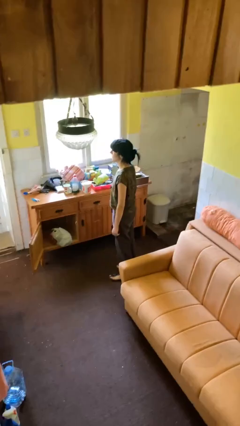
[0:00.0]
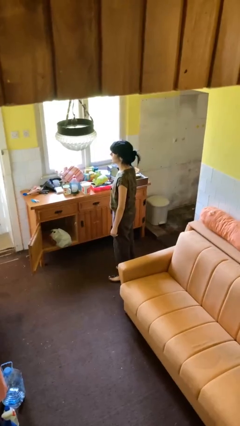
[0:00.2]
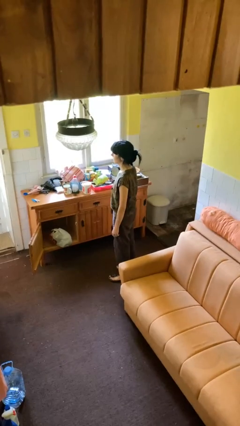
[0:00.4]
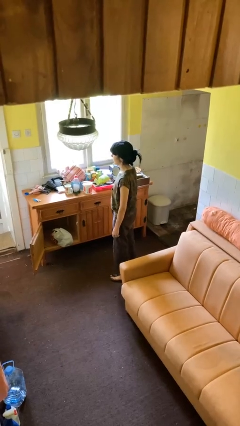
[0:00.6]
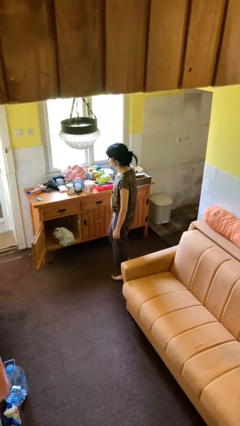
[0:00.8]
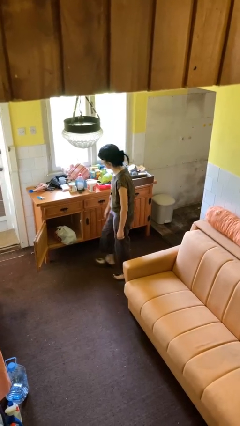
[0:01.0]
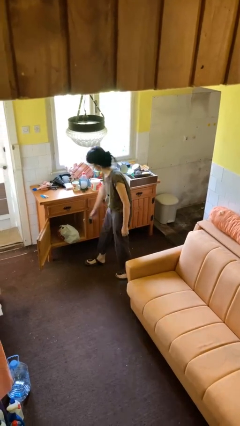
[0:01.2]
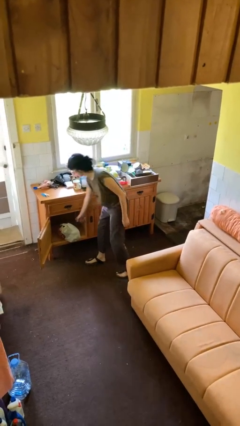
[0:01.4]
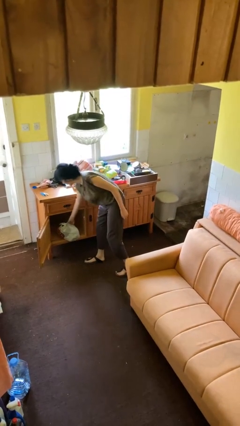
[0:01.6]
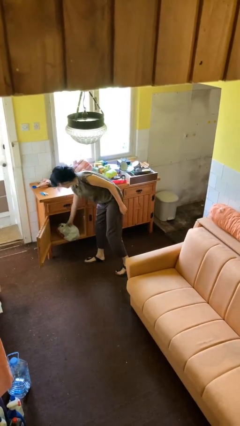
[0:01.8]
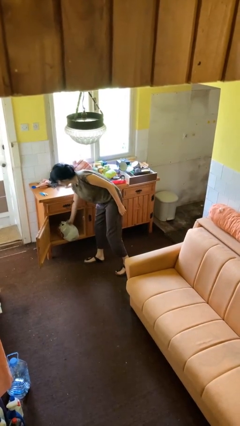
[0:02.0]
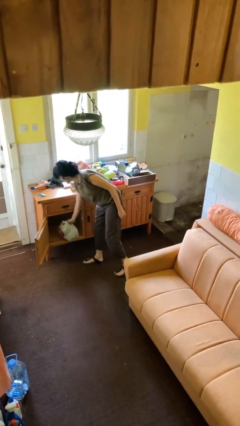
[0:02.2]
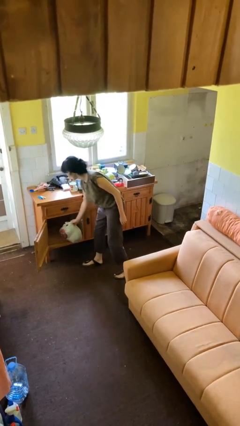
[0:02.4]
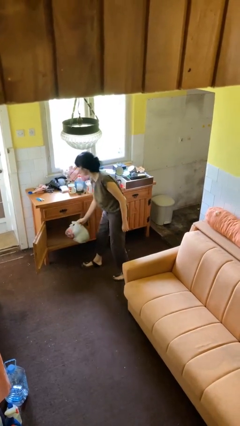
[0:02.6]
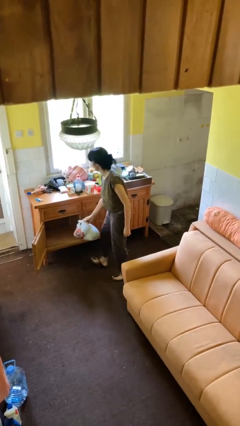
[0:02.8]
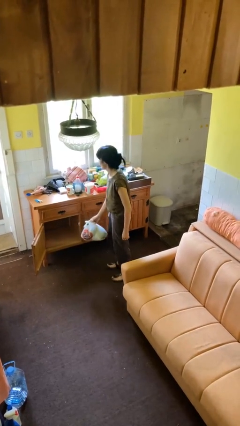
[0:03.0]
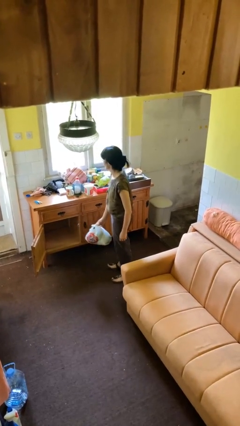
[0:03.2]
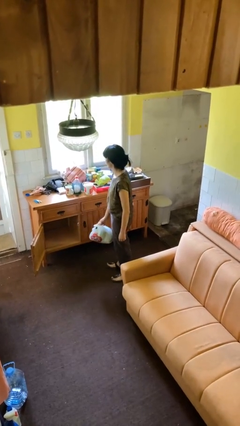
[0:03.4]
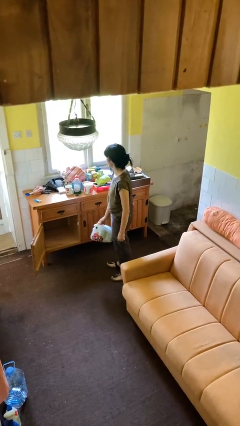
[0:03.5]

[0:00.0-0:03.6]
person picks up object from cabinet

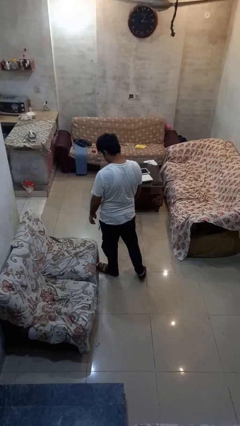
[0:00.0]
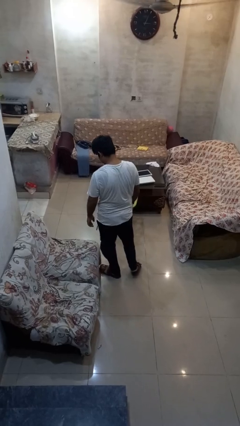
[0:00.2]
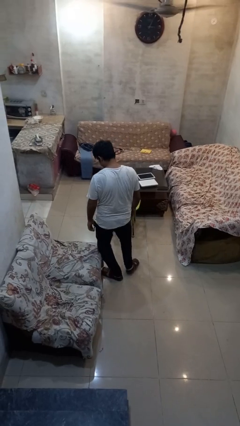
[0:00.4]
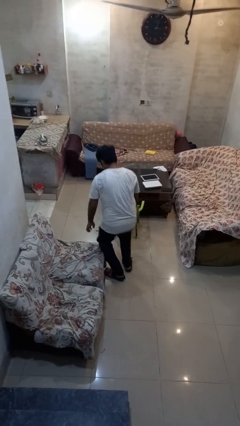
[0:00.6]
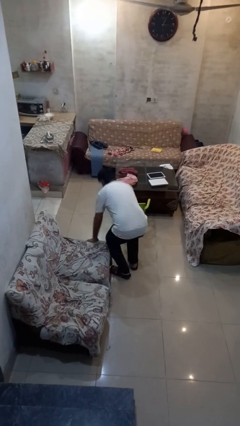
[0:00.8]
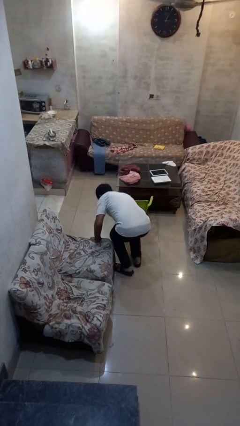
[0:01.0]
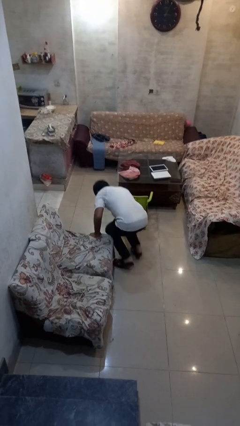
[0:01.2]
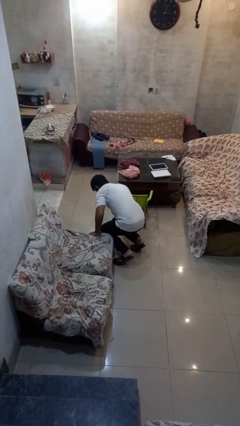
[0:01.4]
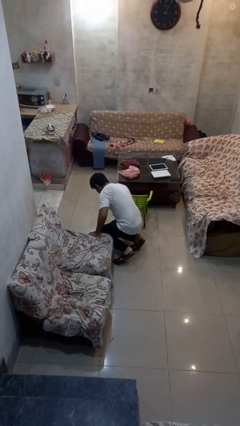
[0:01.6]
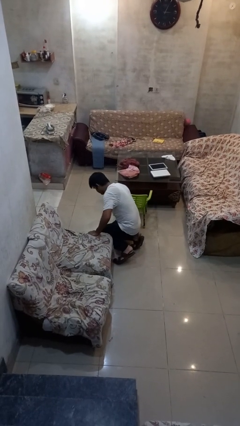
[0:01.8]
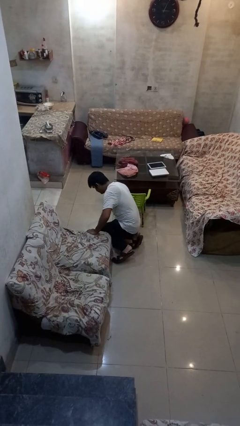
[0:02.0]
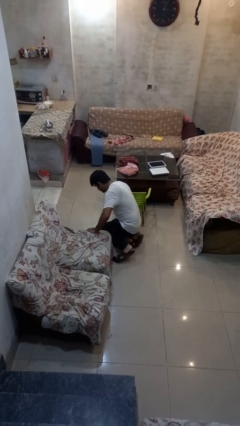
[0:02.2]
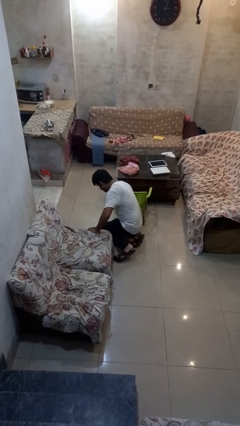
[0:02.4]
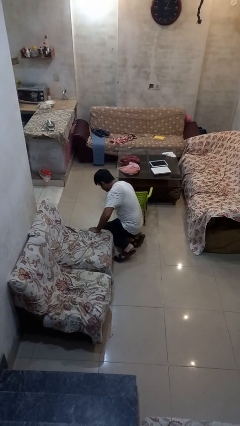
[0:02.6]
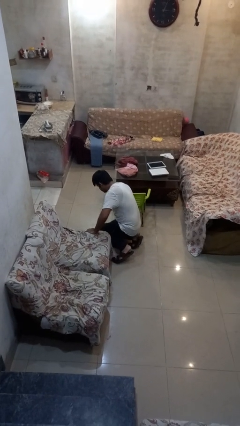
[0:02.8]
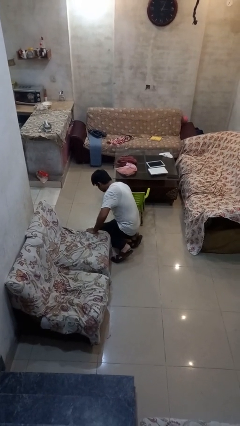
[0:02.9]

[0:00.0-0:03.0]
person trips on object on floor

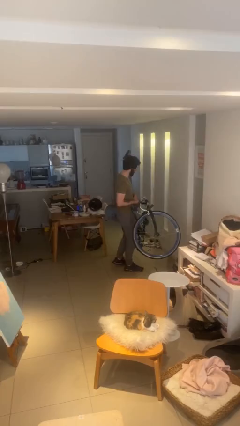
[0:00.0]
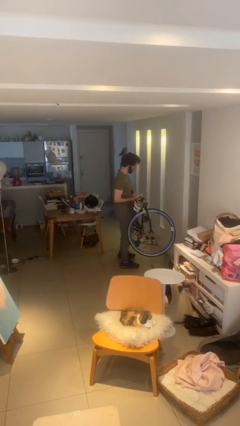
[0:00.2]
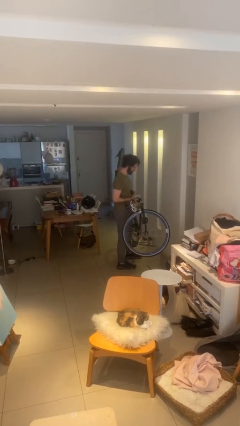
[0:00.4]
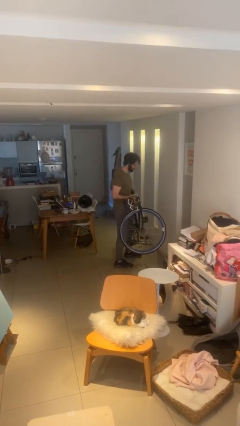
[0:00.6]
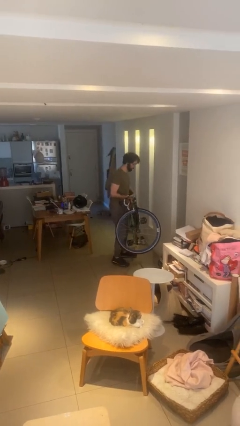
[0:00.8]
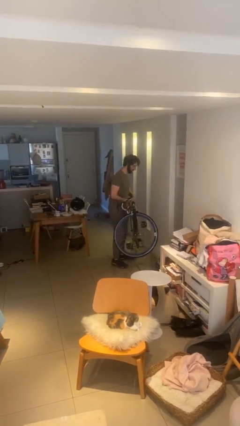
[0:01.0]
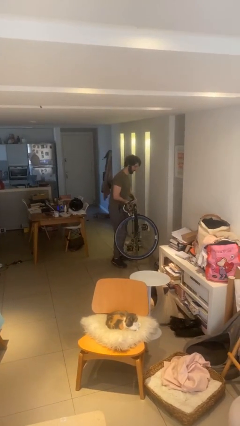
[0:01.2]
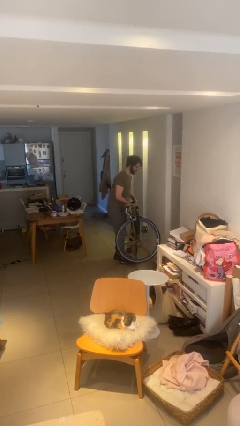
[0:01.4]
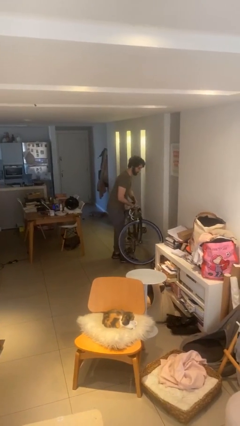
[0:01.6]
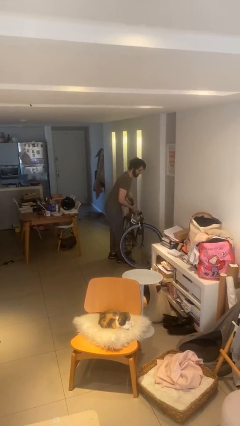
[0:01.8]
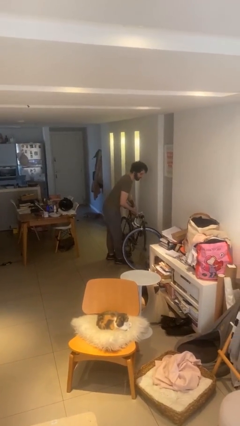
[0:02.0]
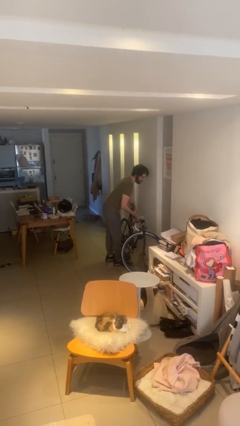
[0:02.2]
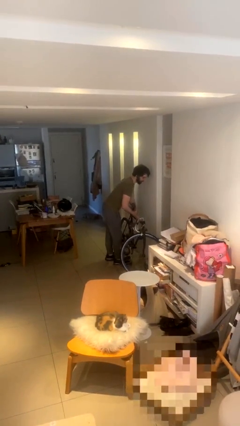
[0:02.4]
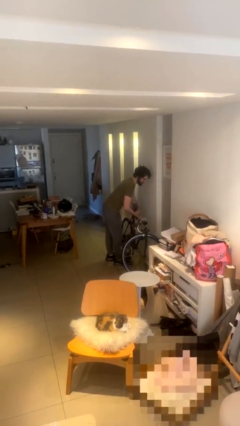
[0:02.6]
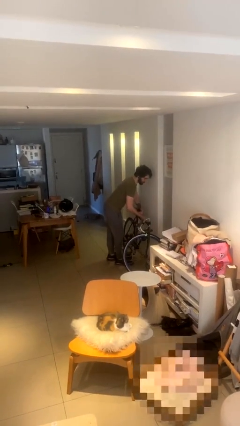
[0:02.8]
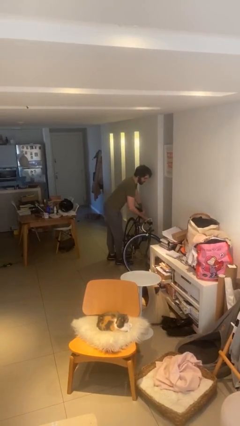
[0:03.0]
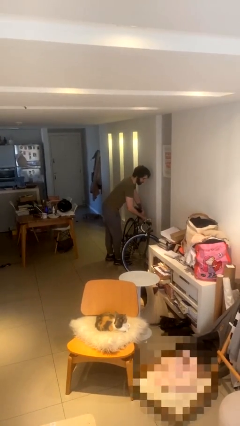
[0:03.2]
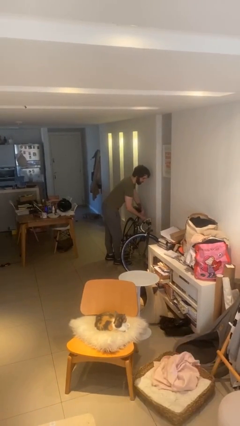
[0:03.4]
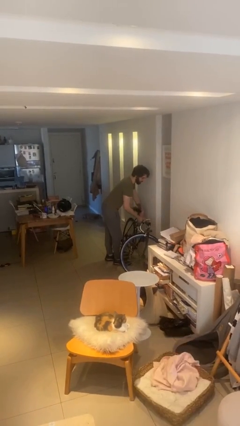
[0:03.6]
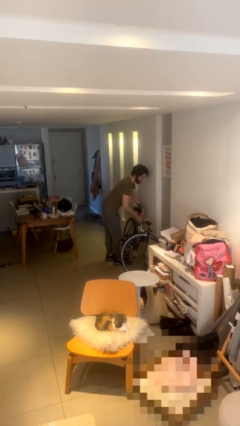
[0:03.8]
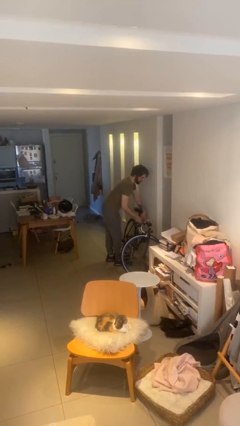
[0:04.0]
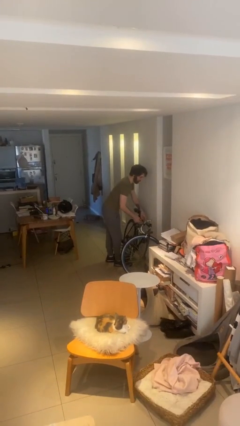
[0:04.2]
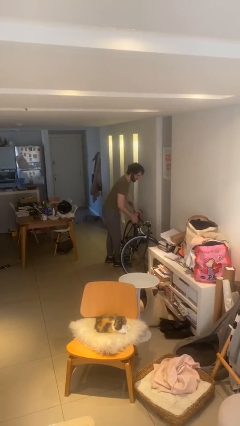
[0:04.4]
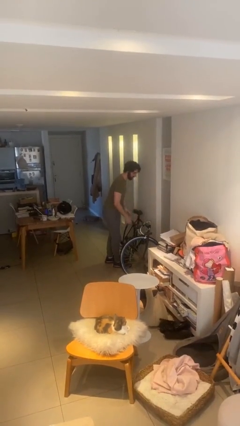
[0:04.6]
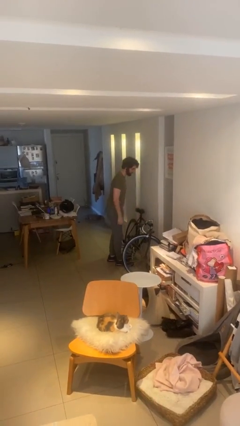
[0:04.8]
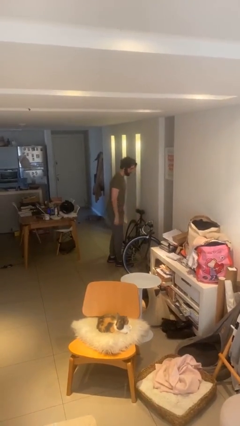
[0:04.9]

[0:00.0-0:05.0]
person puts down object on floor

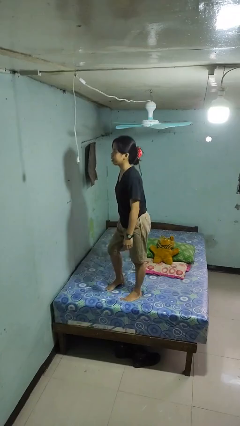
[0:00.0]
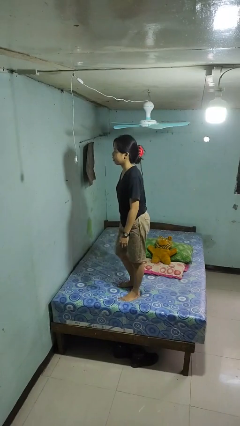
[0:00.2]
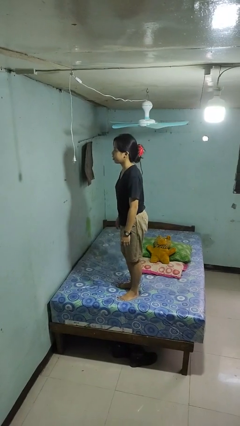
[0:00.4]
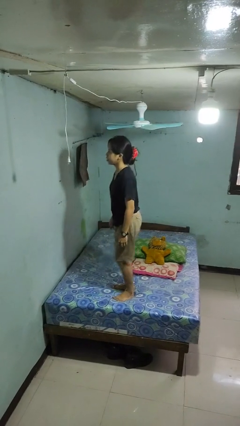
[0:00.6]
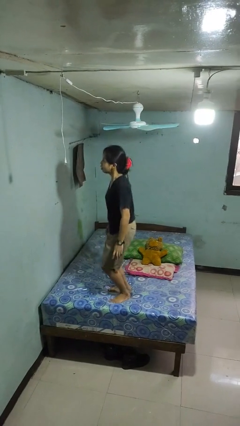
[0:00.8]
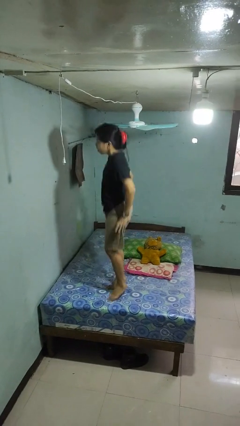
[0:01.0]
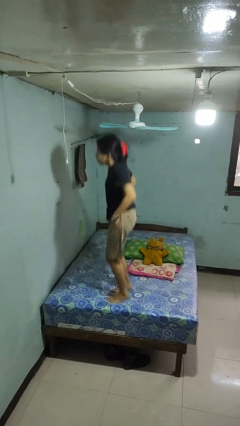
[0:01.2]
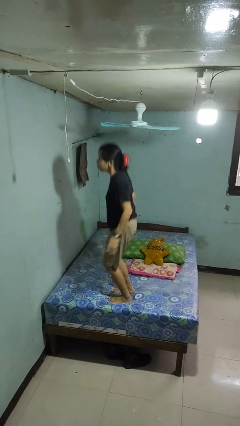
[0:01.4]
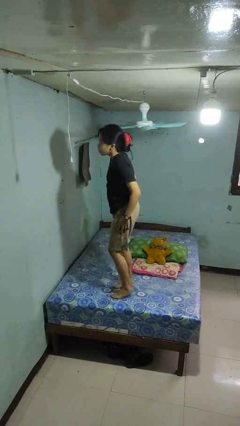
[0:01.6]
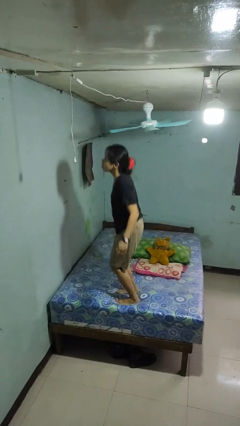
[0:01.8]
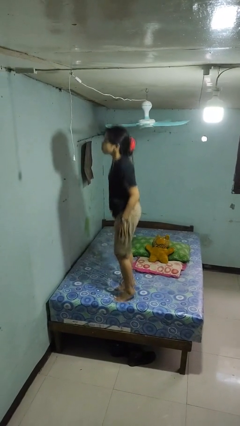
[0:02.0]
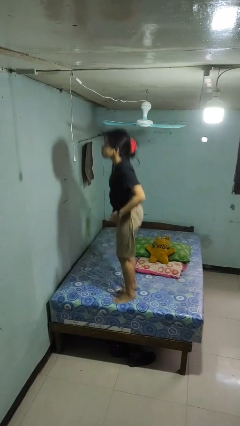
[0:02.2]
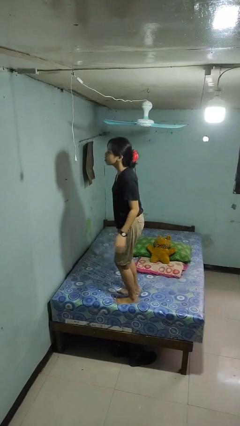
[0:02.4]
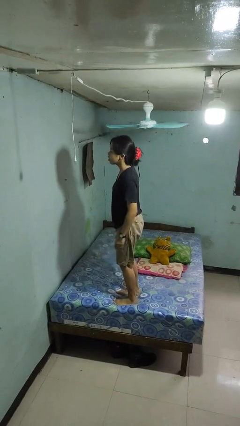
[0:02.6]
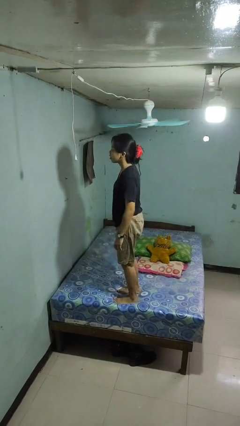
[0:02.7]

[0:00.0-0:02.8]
person jumps on bed

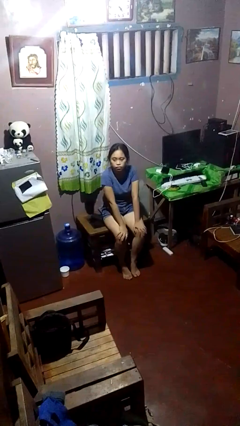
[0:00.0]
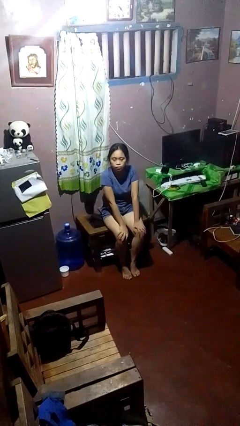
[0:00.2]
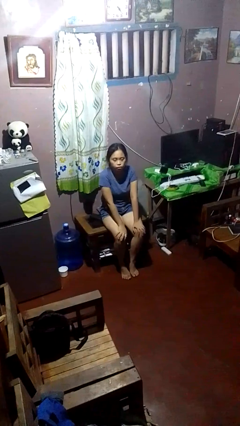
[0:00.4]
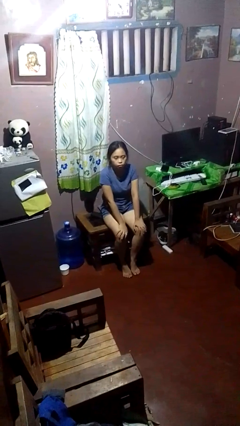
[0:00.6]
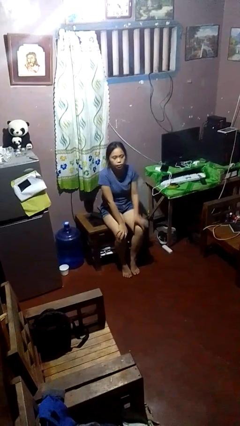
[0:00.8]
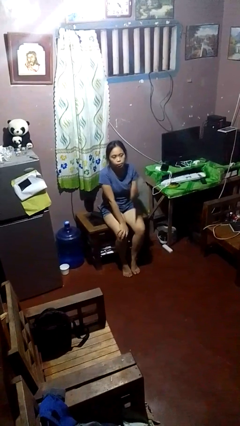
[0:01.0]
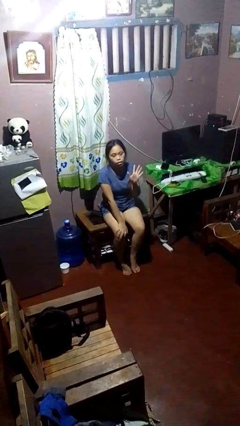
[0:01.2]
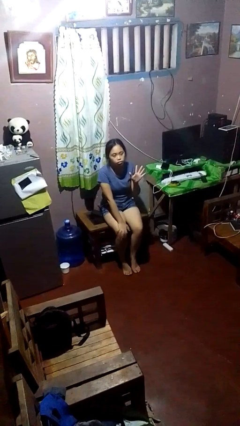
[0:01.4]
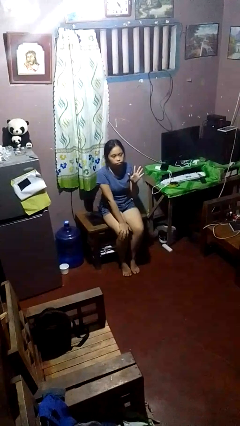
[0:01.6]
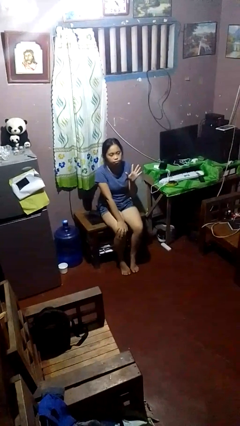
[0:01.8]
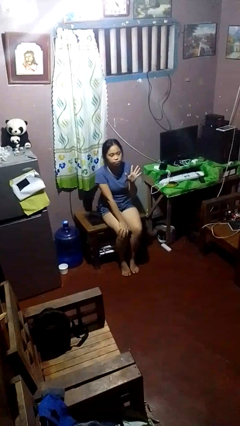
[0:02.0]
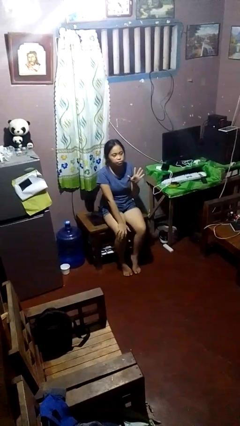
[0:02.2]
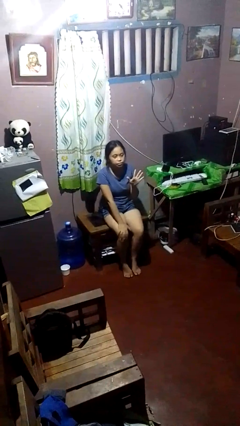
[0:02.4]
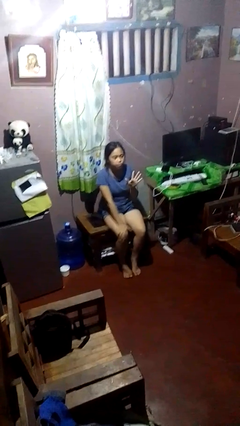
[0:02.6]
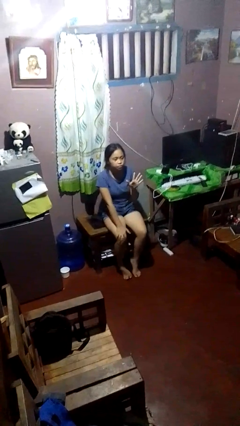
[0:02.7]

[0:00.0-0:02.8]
person gestures number five

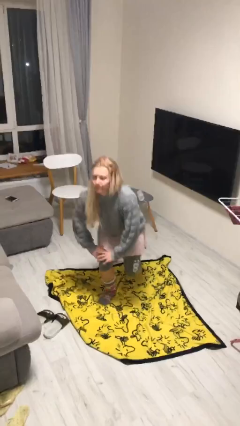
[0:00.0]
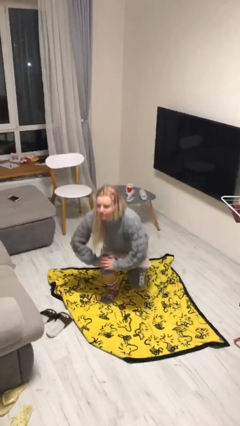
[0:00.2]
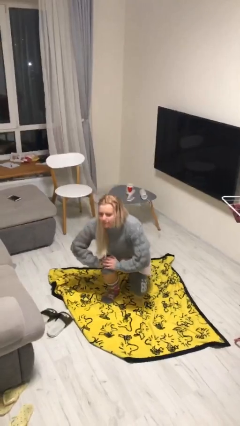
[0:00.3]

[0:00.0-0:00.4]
person sits down
